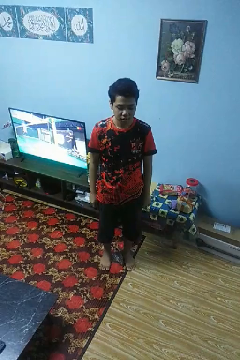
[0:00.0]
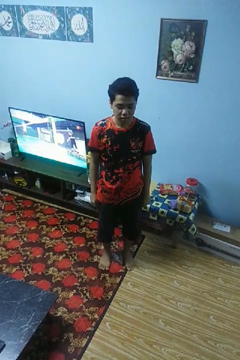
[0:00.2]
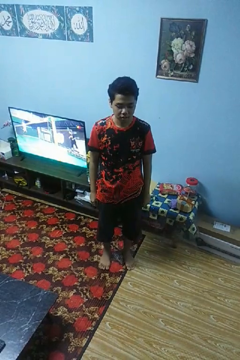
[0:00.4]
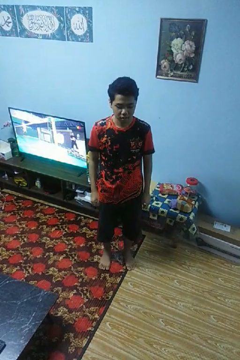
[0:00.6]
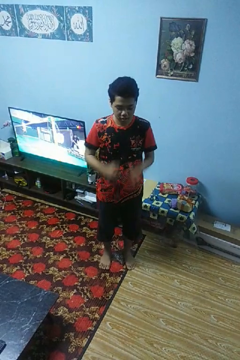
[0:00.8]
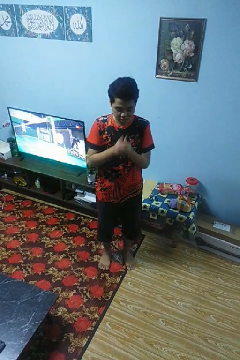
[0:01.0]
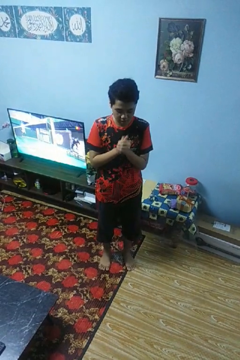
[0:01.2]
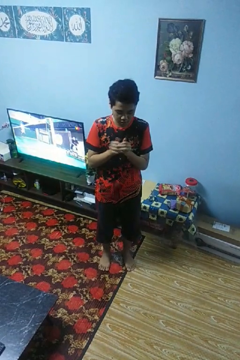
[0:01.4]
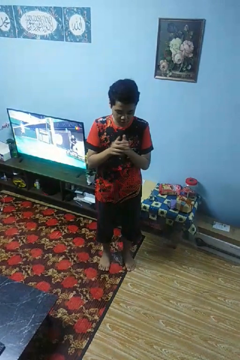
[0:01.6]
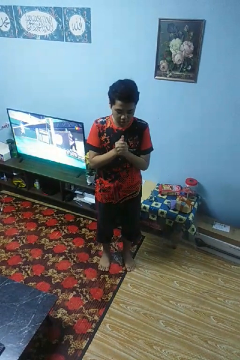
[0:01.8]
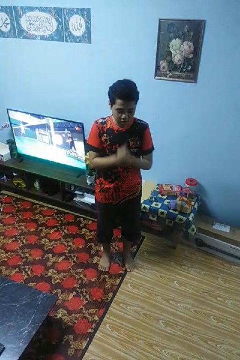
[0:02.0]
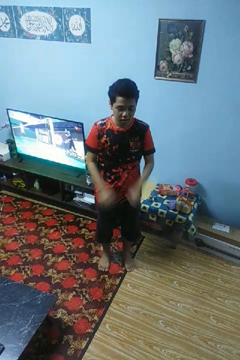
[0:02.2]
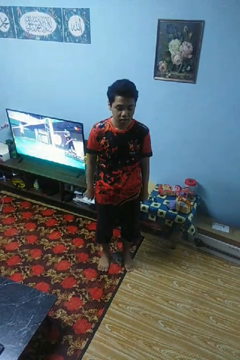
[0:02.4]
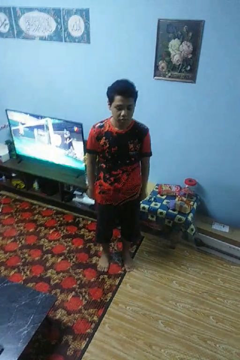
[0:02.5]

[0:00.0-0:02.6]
person cracks knuckles

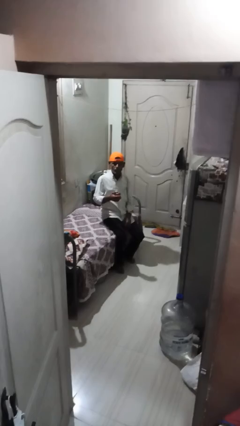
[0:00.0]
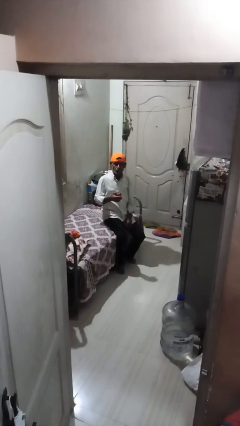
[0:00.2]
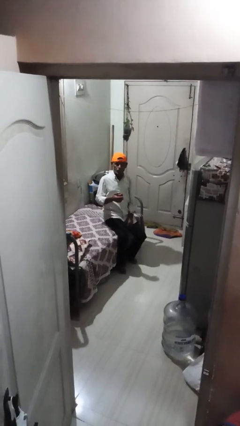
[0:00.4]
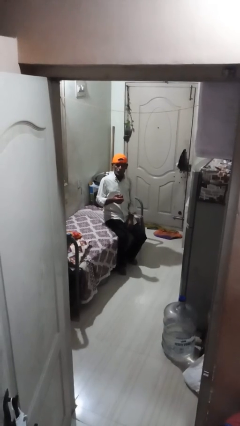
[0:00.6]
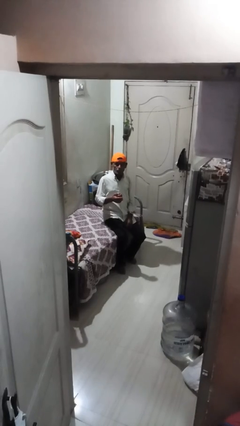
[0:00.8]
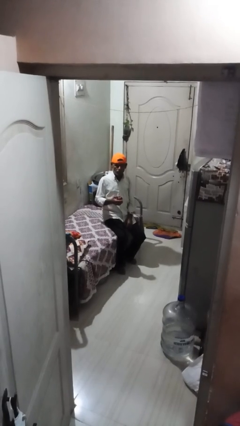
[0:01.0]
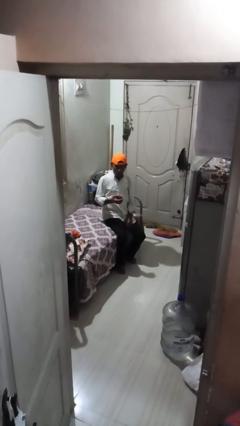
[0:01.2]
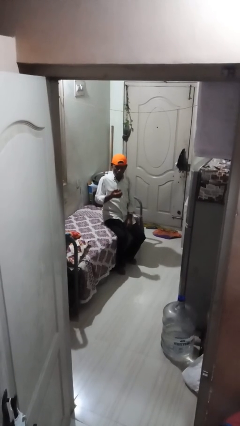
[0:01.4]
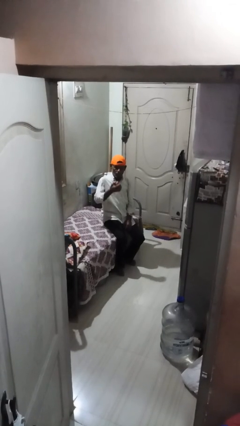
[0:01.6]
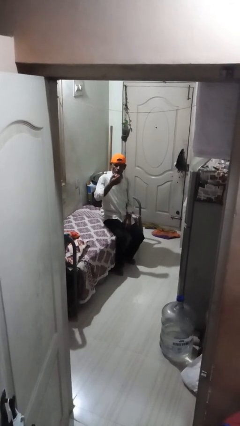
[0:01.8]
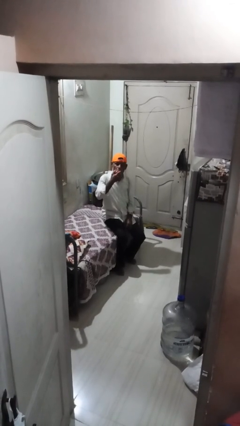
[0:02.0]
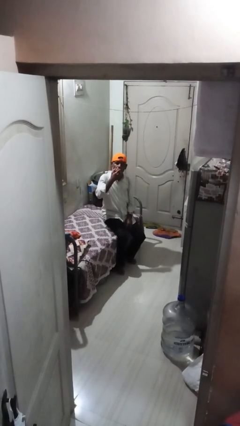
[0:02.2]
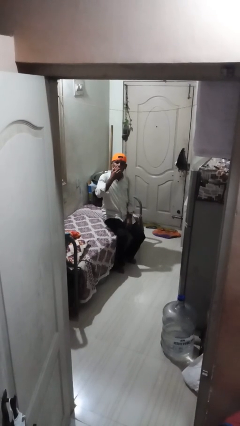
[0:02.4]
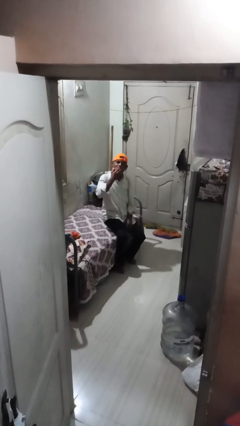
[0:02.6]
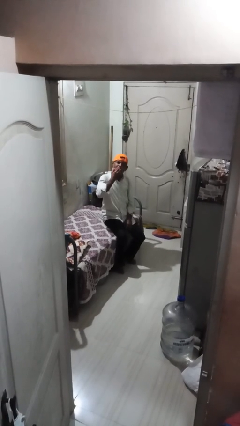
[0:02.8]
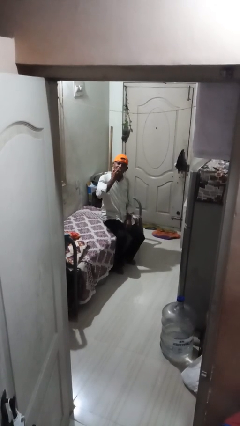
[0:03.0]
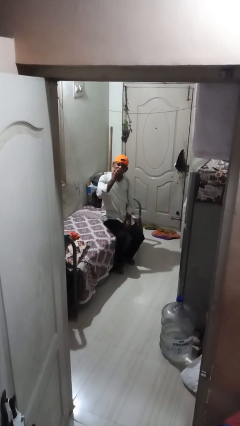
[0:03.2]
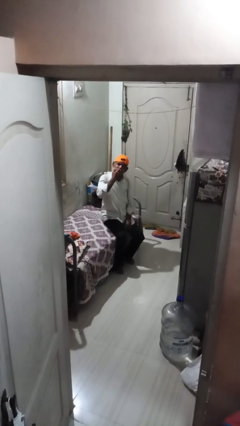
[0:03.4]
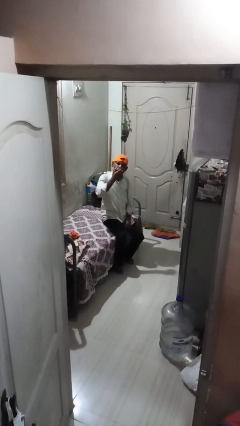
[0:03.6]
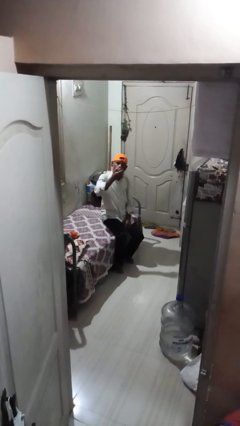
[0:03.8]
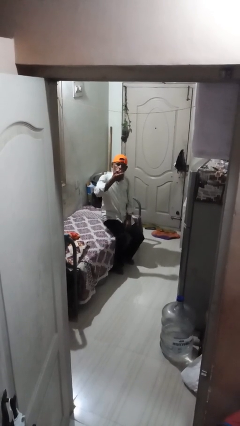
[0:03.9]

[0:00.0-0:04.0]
person eats apple

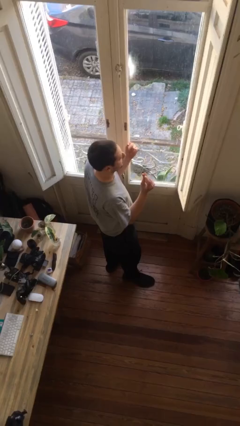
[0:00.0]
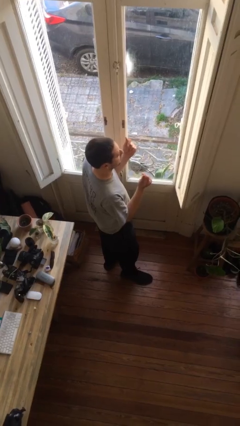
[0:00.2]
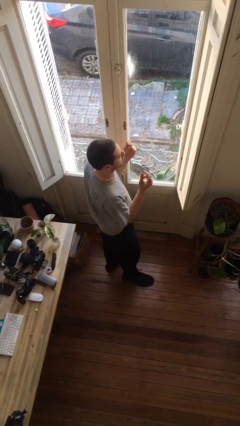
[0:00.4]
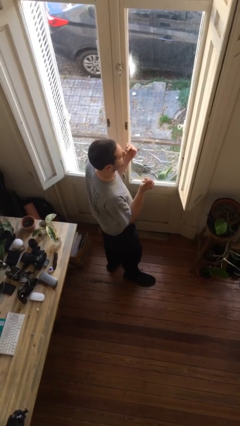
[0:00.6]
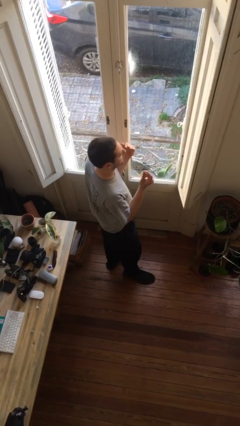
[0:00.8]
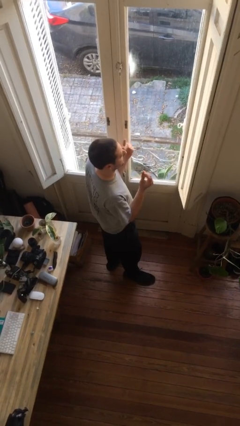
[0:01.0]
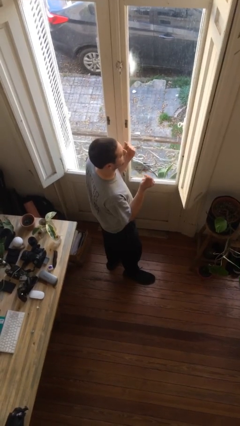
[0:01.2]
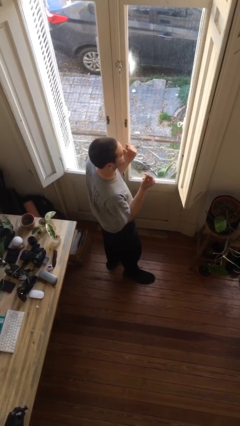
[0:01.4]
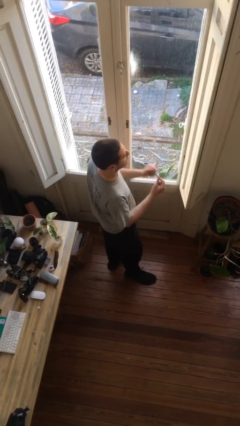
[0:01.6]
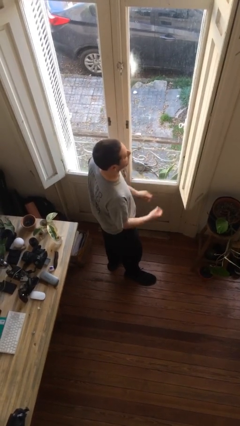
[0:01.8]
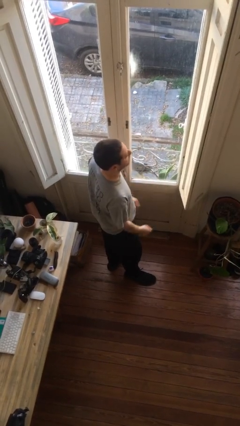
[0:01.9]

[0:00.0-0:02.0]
person snaps fingers

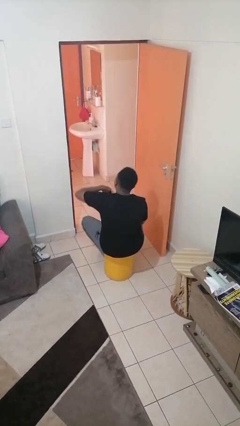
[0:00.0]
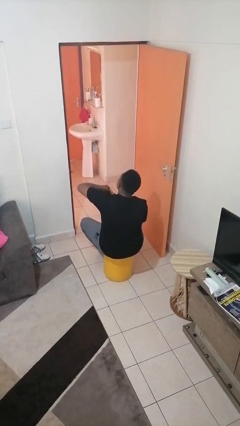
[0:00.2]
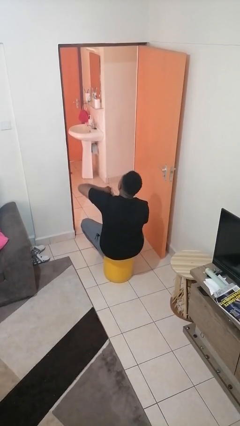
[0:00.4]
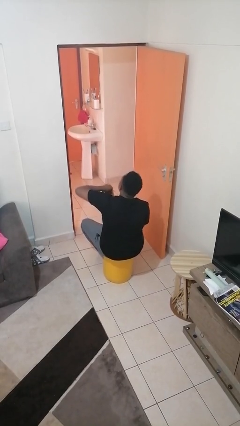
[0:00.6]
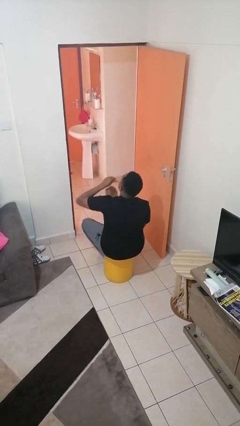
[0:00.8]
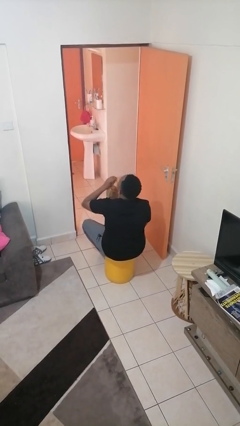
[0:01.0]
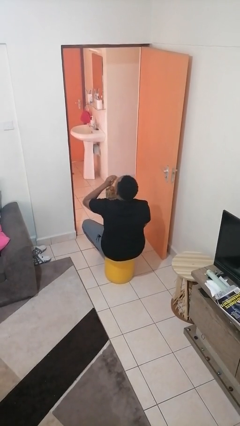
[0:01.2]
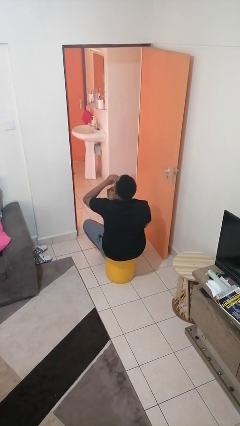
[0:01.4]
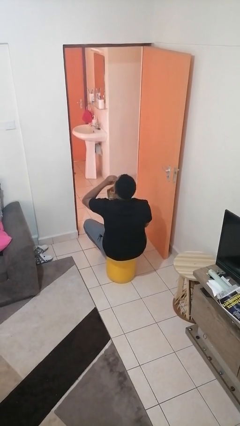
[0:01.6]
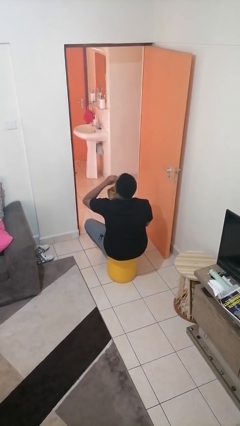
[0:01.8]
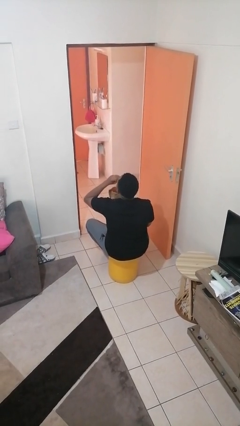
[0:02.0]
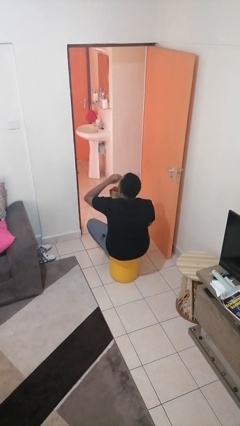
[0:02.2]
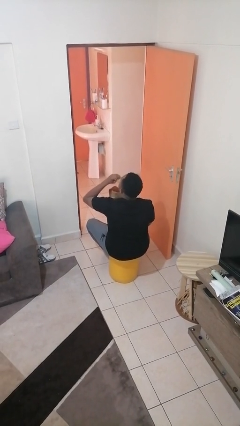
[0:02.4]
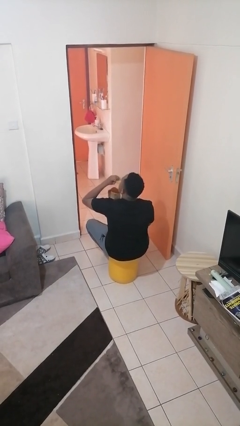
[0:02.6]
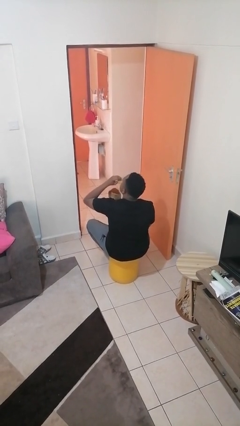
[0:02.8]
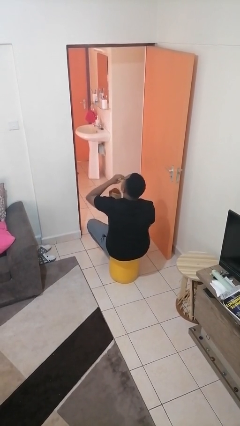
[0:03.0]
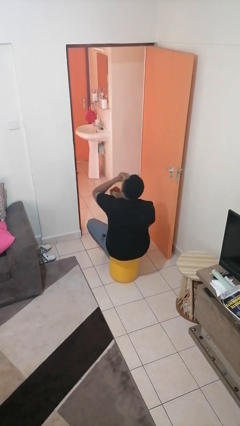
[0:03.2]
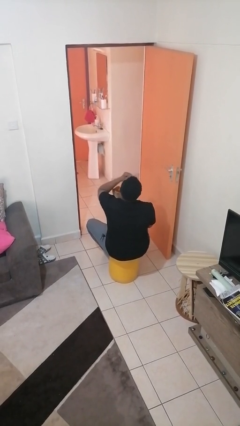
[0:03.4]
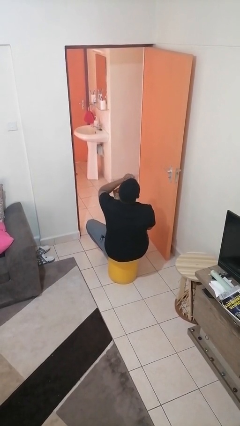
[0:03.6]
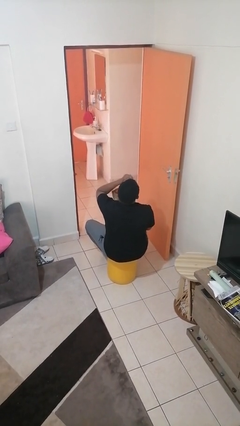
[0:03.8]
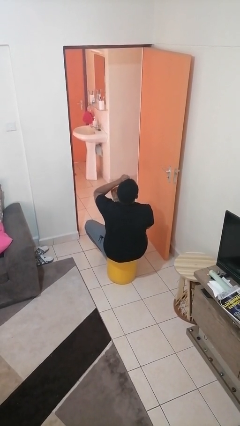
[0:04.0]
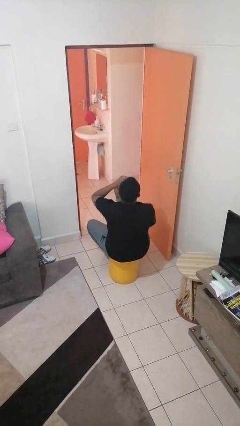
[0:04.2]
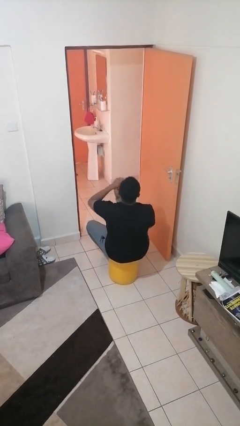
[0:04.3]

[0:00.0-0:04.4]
person eats snack from bag

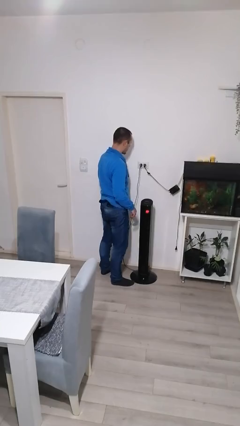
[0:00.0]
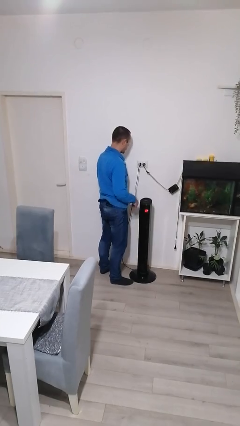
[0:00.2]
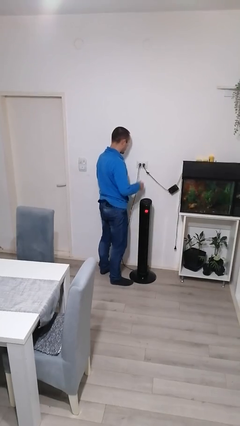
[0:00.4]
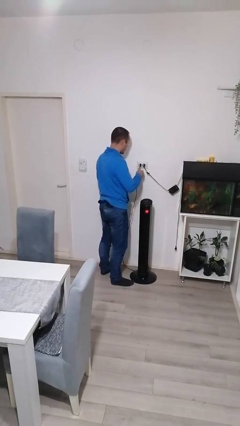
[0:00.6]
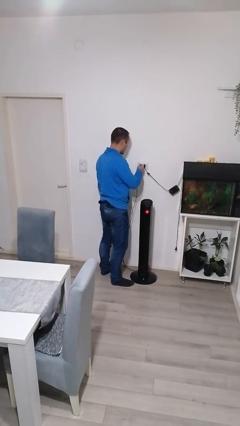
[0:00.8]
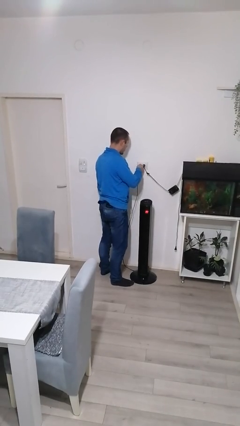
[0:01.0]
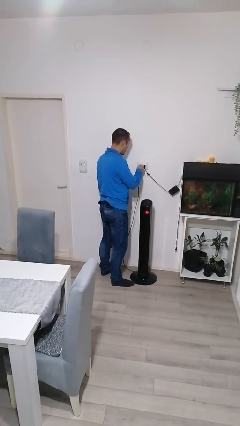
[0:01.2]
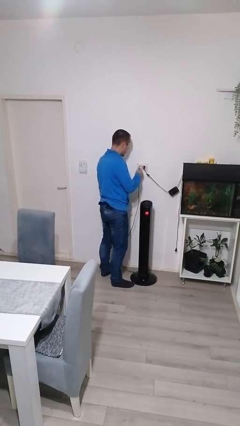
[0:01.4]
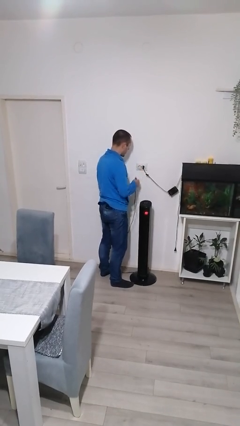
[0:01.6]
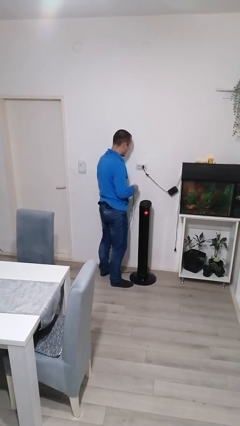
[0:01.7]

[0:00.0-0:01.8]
person unplugs from electrical socket

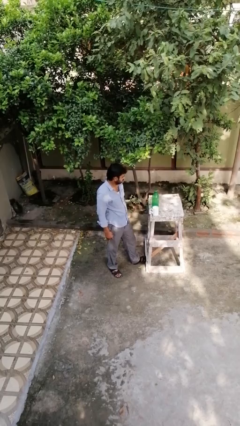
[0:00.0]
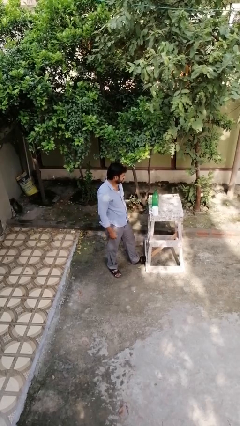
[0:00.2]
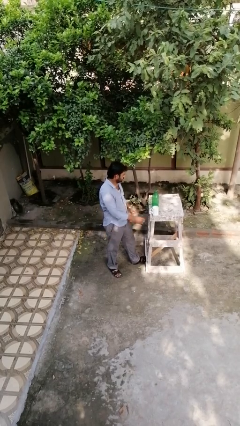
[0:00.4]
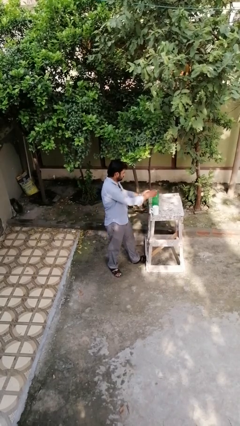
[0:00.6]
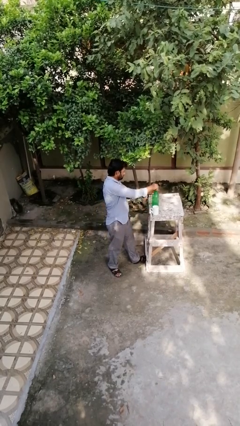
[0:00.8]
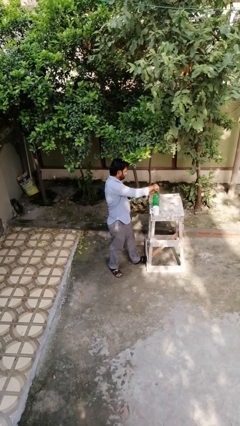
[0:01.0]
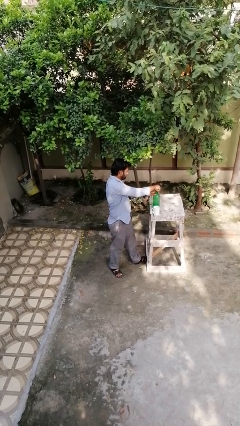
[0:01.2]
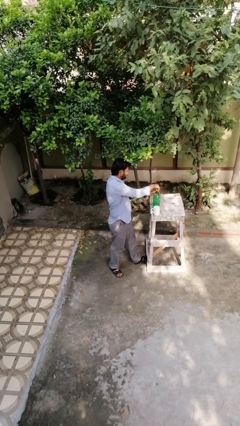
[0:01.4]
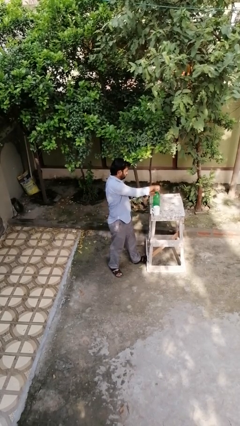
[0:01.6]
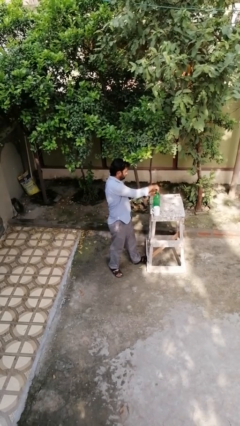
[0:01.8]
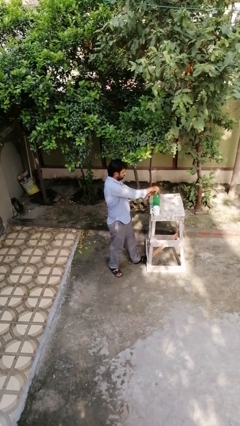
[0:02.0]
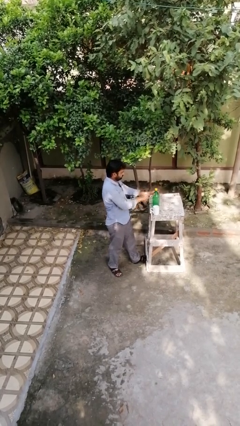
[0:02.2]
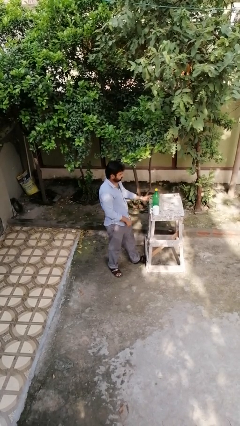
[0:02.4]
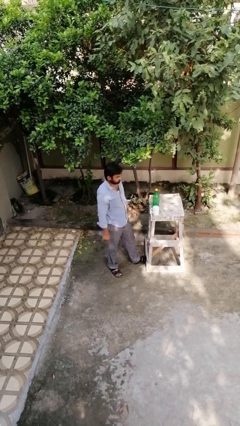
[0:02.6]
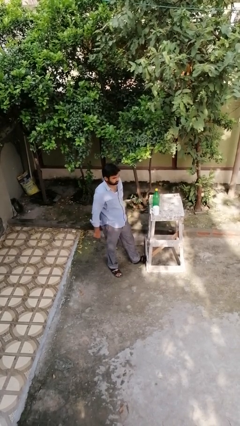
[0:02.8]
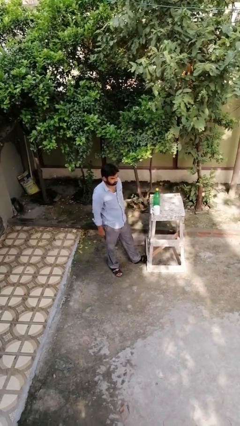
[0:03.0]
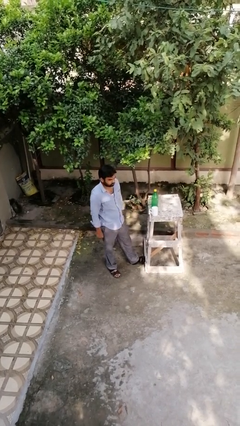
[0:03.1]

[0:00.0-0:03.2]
person screws lid to bottle
